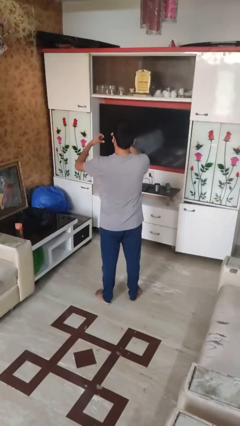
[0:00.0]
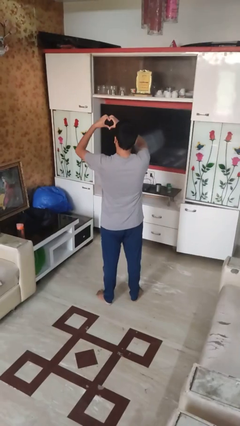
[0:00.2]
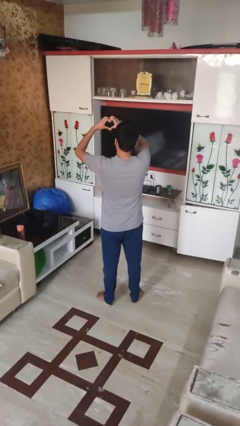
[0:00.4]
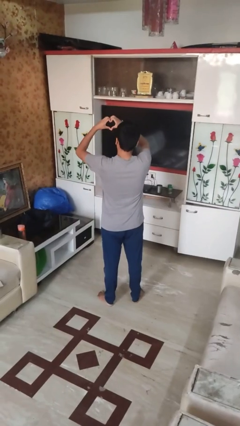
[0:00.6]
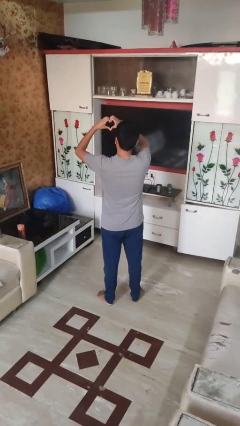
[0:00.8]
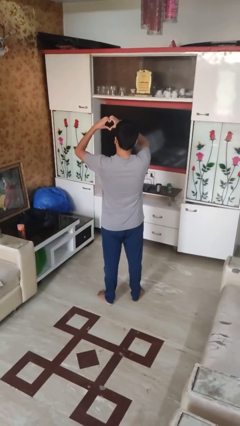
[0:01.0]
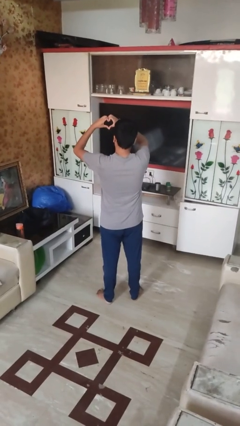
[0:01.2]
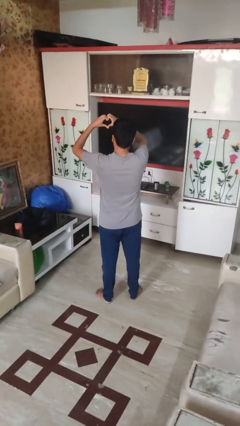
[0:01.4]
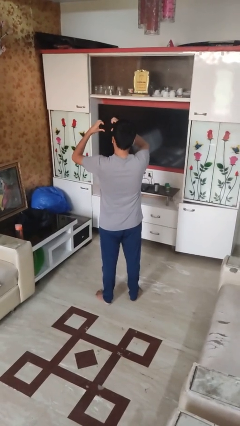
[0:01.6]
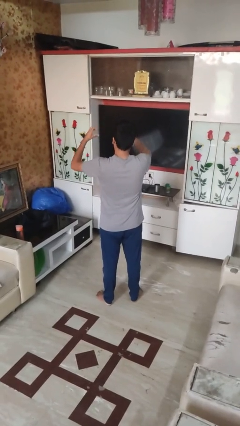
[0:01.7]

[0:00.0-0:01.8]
person gestures heart

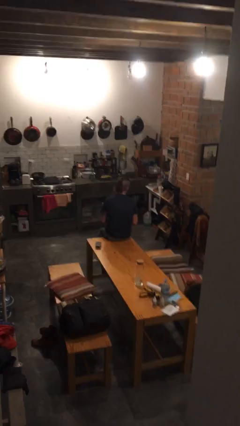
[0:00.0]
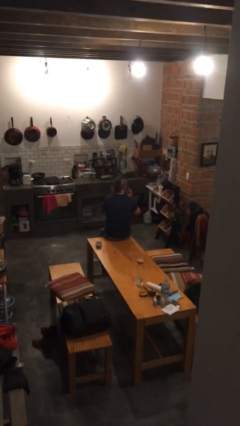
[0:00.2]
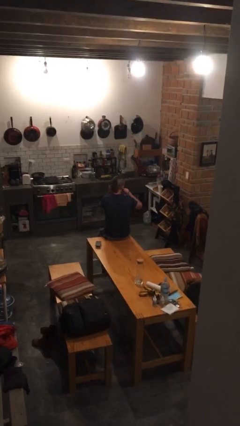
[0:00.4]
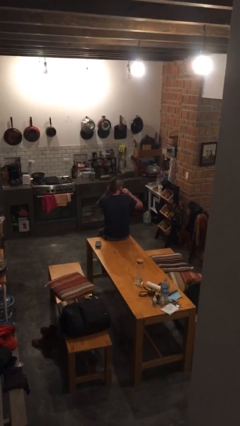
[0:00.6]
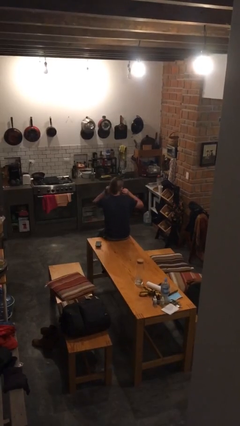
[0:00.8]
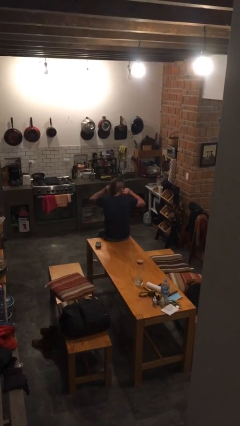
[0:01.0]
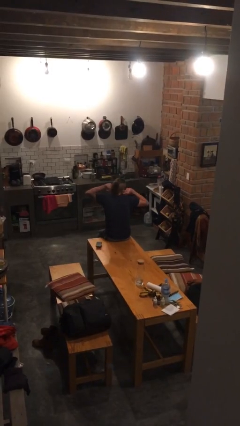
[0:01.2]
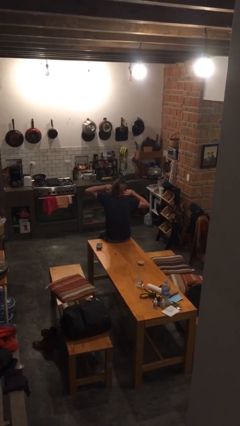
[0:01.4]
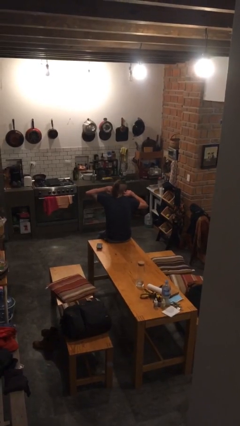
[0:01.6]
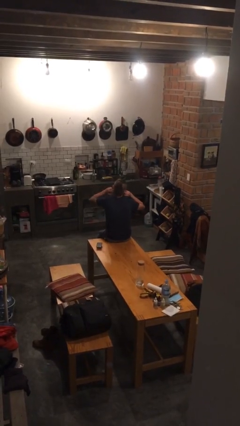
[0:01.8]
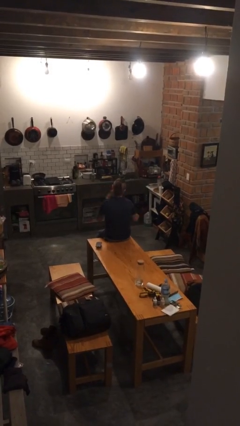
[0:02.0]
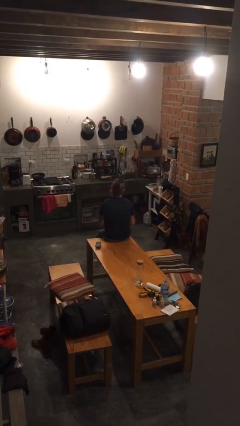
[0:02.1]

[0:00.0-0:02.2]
person puts fingers in ear

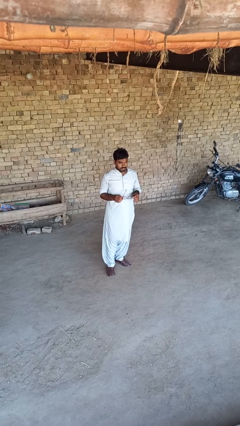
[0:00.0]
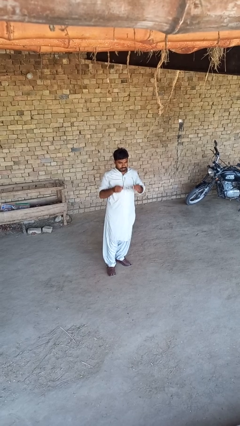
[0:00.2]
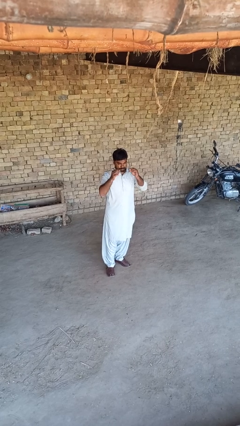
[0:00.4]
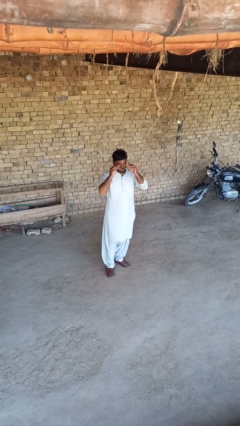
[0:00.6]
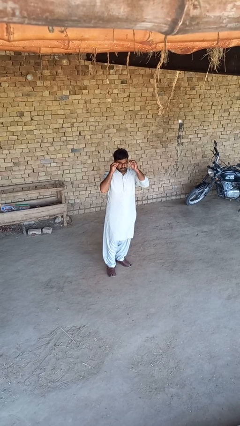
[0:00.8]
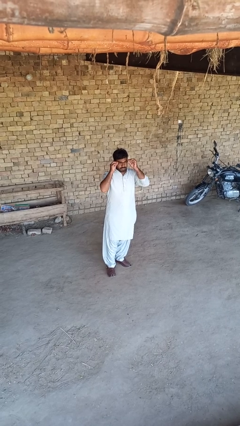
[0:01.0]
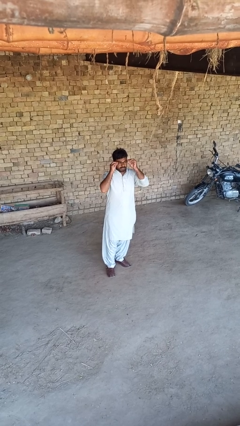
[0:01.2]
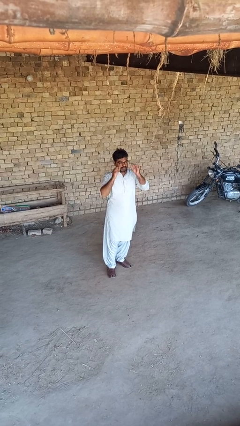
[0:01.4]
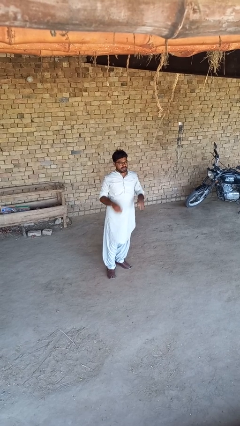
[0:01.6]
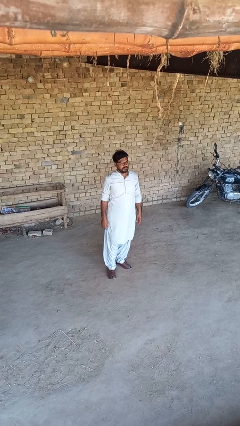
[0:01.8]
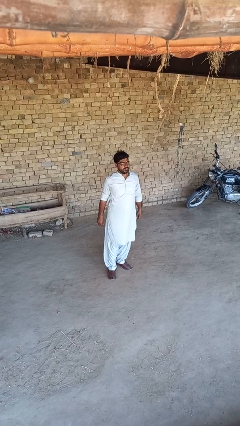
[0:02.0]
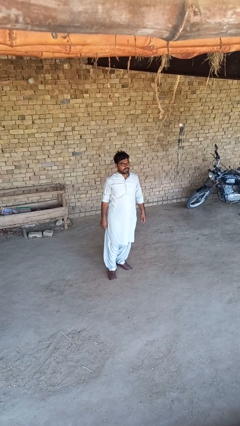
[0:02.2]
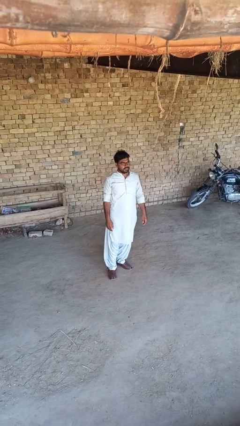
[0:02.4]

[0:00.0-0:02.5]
person puts on glasses

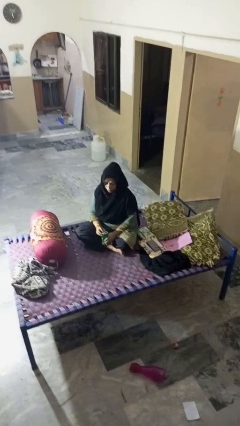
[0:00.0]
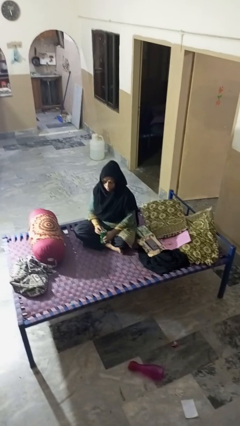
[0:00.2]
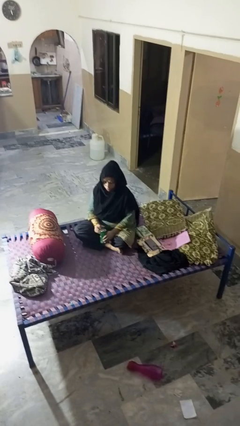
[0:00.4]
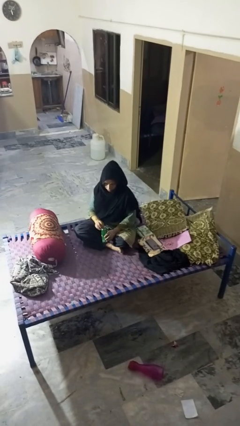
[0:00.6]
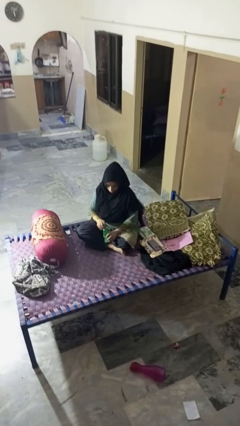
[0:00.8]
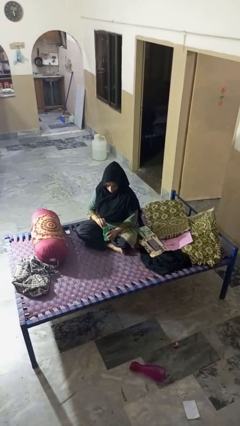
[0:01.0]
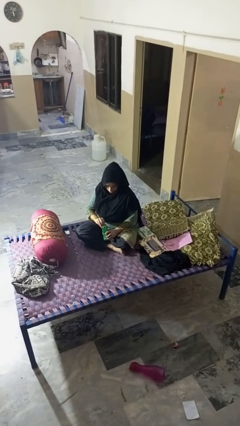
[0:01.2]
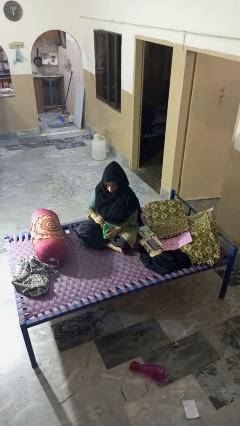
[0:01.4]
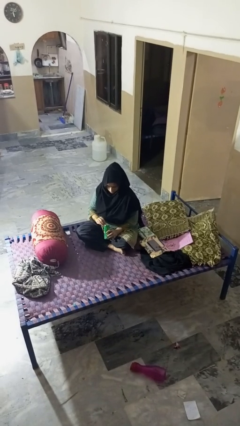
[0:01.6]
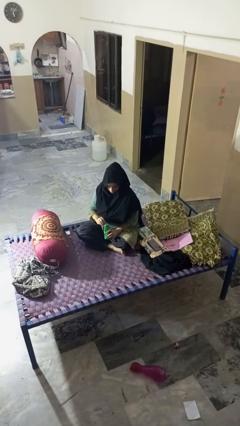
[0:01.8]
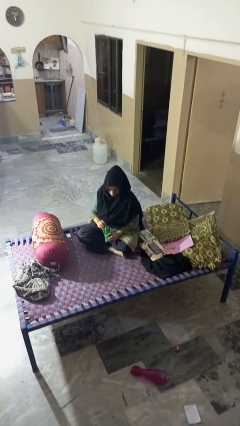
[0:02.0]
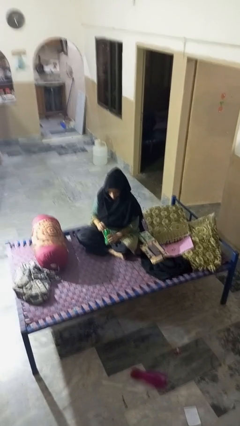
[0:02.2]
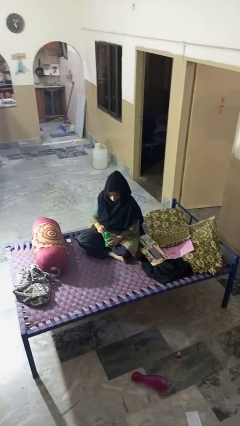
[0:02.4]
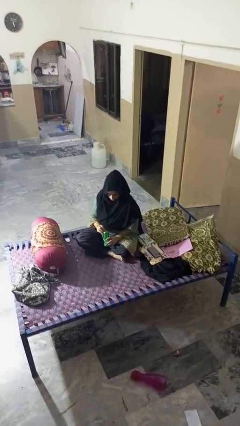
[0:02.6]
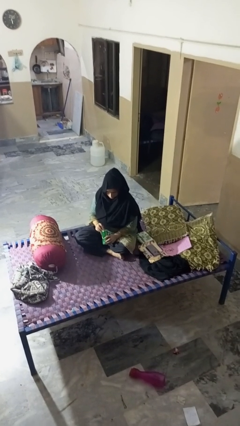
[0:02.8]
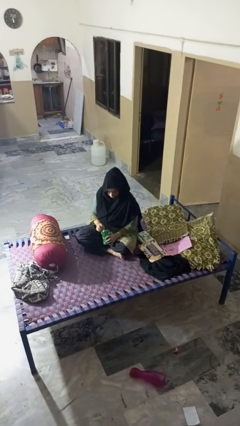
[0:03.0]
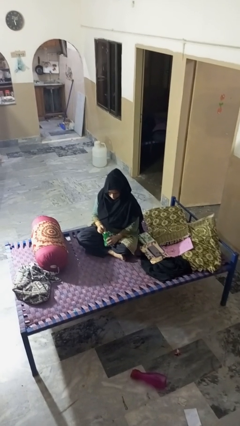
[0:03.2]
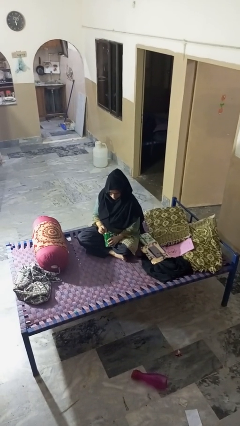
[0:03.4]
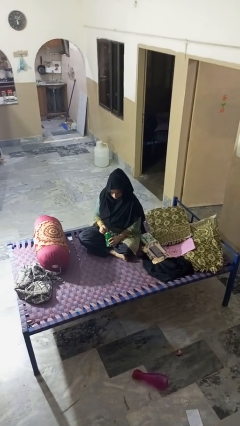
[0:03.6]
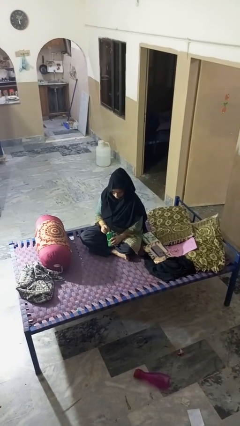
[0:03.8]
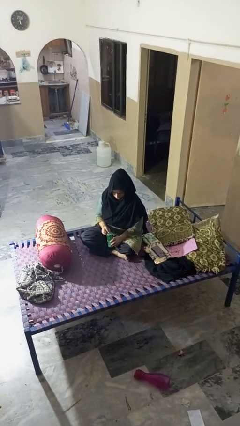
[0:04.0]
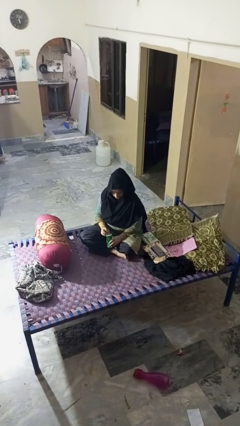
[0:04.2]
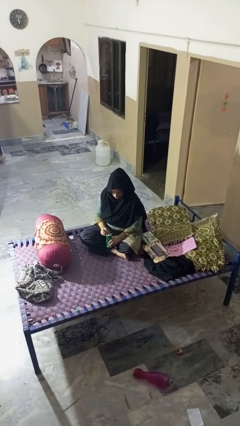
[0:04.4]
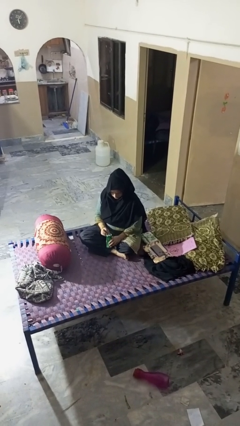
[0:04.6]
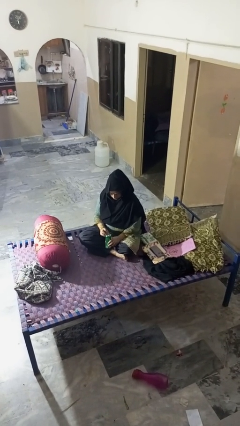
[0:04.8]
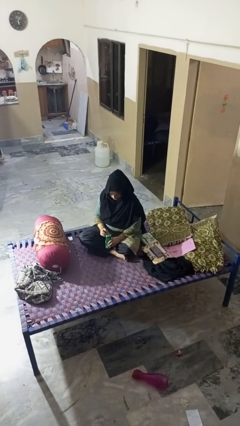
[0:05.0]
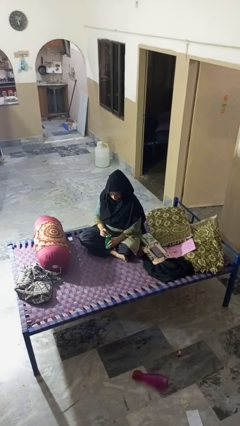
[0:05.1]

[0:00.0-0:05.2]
person opens can with can opener

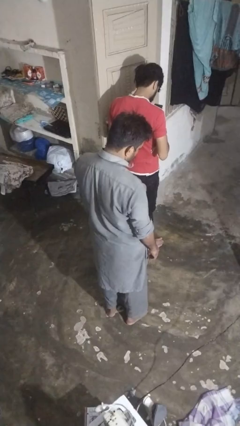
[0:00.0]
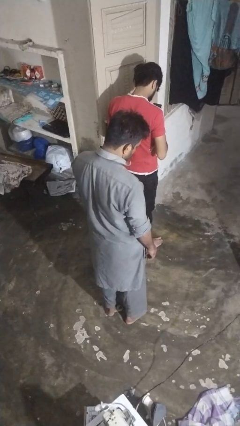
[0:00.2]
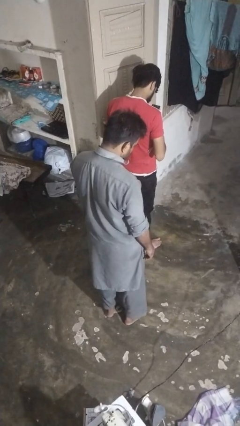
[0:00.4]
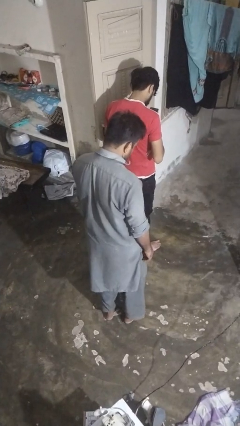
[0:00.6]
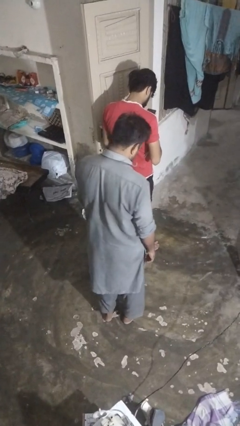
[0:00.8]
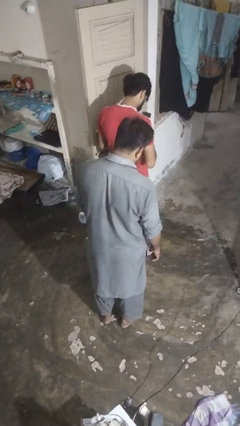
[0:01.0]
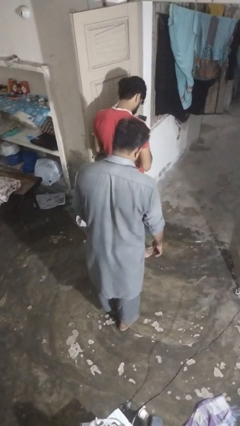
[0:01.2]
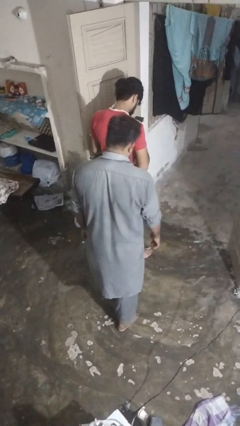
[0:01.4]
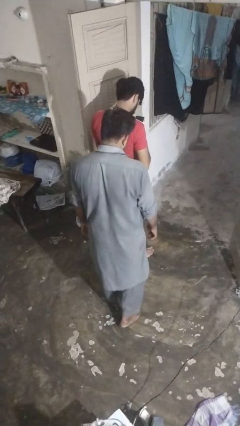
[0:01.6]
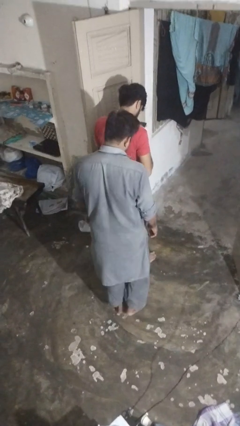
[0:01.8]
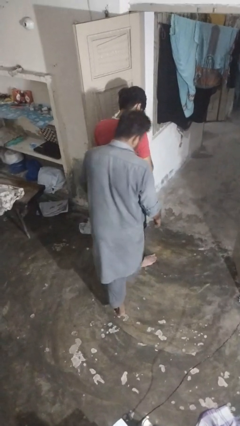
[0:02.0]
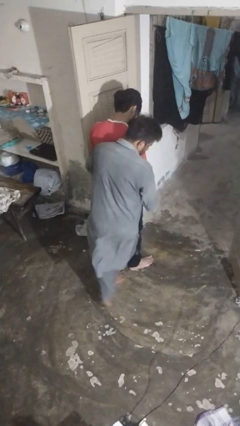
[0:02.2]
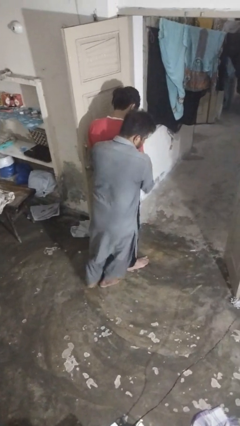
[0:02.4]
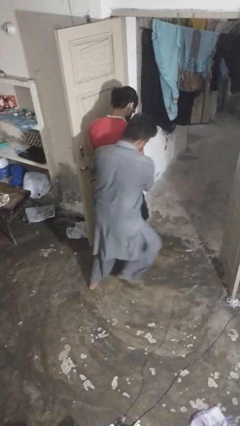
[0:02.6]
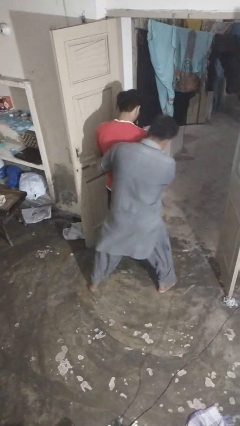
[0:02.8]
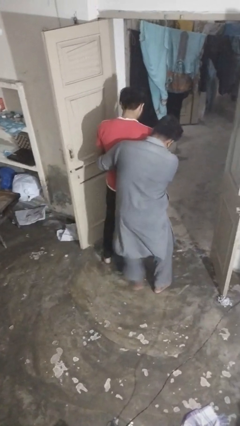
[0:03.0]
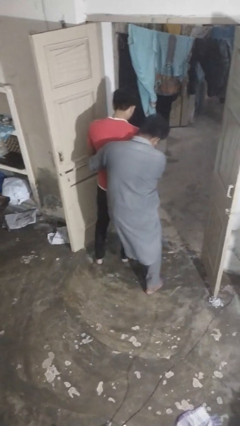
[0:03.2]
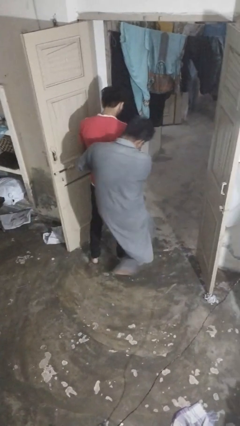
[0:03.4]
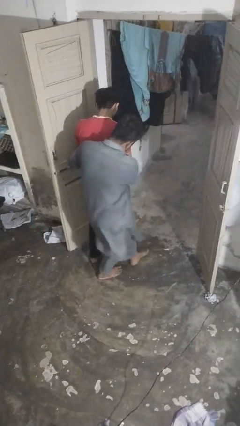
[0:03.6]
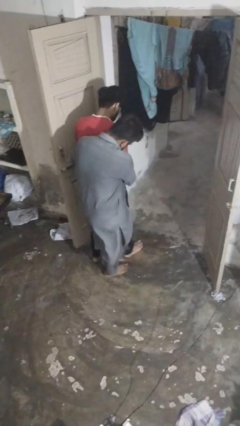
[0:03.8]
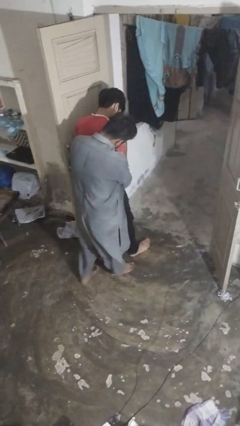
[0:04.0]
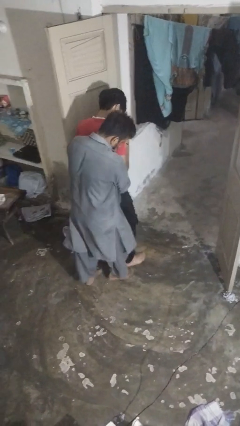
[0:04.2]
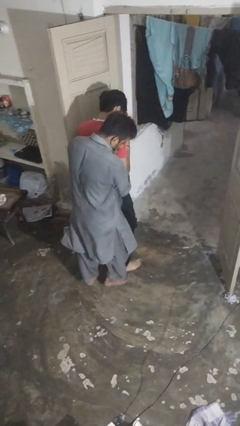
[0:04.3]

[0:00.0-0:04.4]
person bumps into person

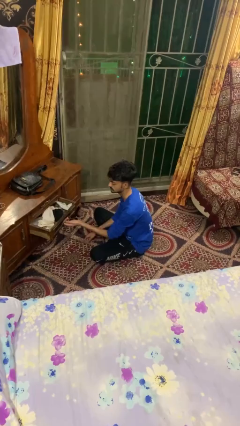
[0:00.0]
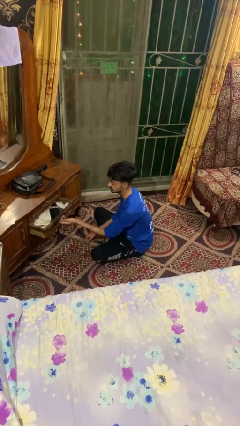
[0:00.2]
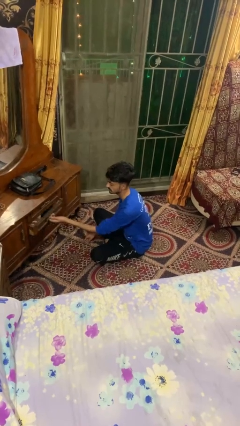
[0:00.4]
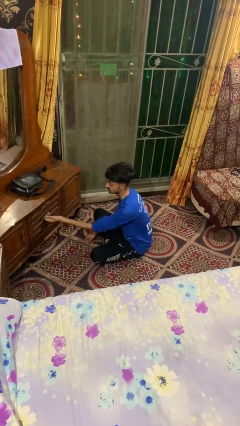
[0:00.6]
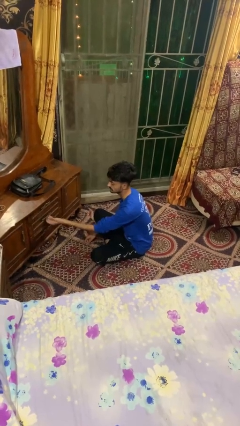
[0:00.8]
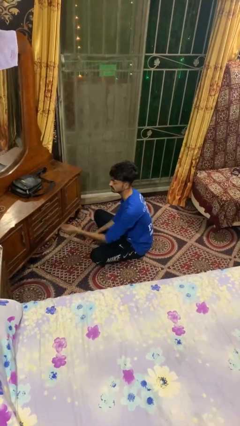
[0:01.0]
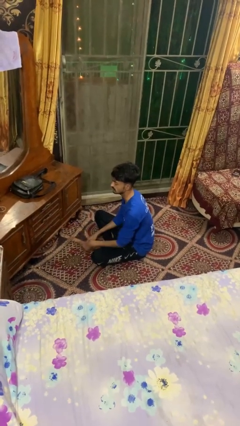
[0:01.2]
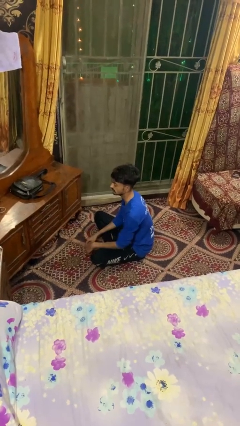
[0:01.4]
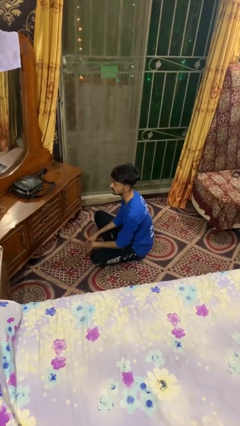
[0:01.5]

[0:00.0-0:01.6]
person closes dresser drawer
